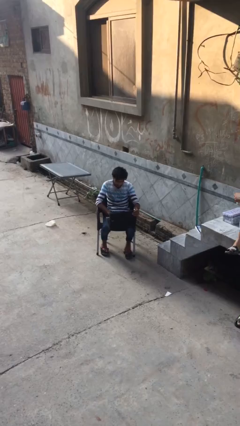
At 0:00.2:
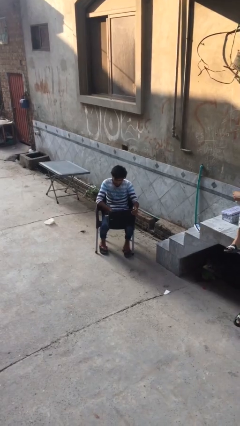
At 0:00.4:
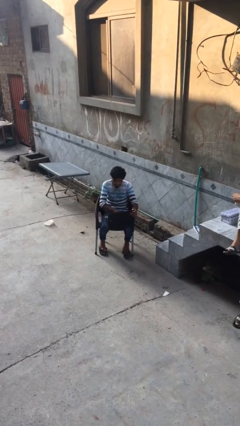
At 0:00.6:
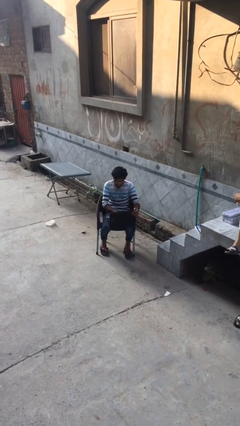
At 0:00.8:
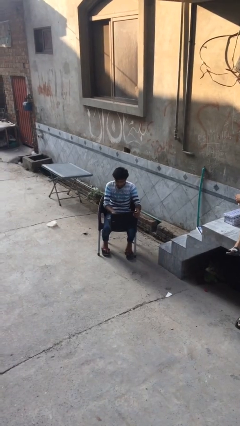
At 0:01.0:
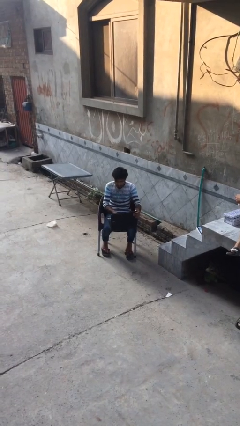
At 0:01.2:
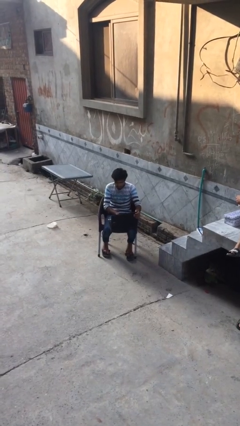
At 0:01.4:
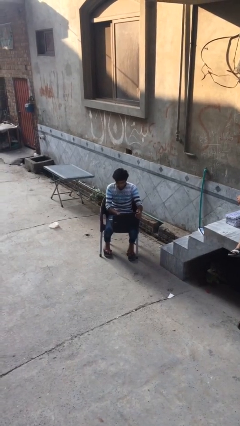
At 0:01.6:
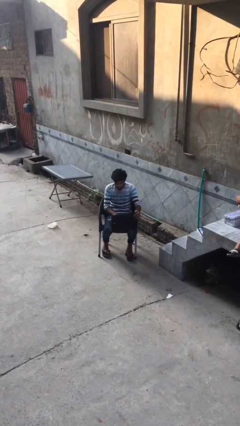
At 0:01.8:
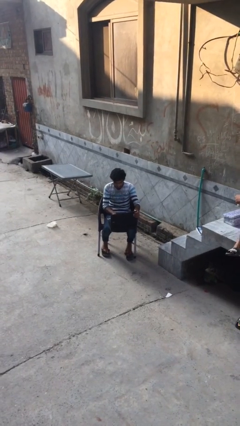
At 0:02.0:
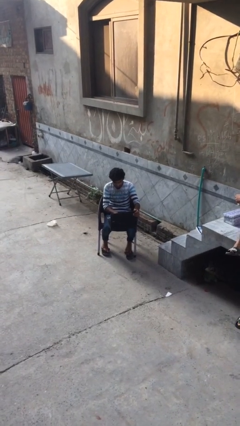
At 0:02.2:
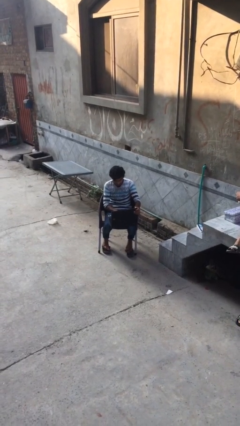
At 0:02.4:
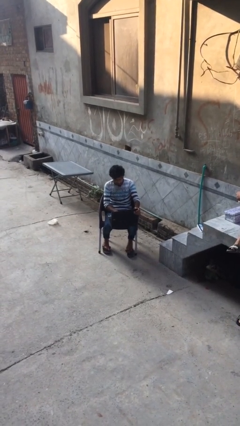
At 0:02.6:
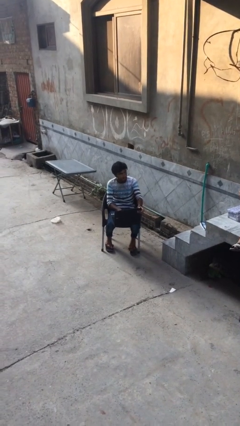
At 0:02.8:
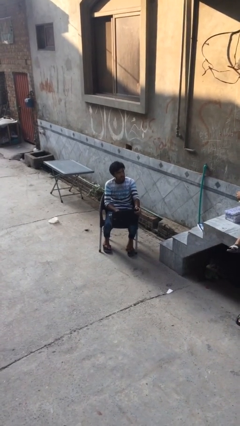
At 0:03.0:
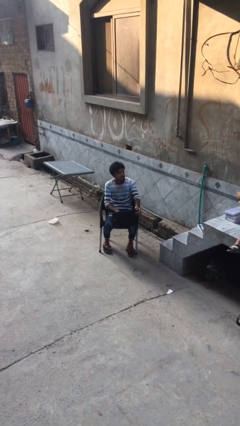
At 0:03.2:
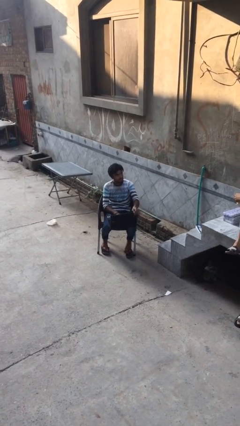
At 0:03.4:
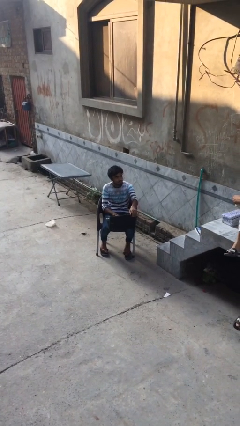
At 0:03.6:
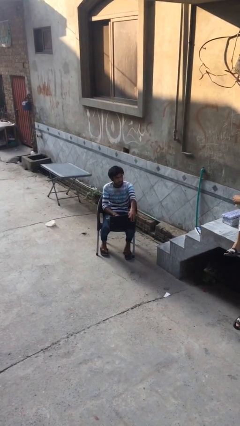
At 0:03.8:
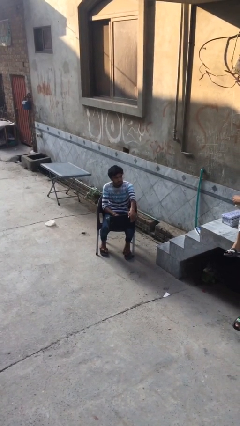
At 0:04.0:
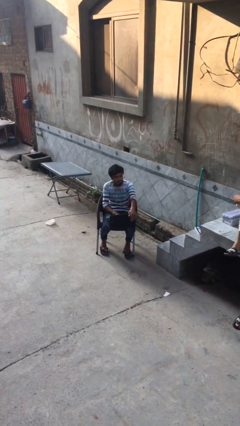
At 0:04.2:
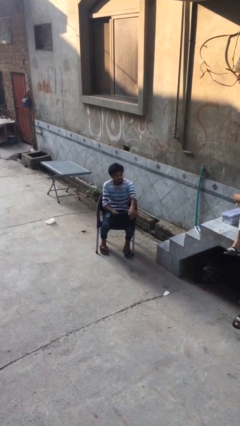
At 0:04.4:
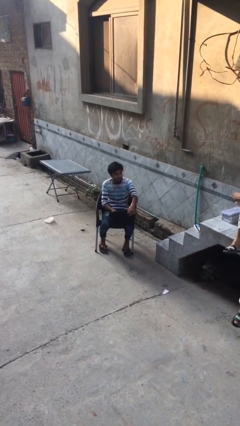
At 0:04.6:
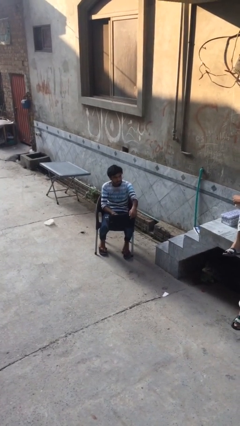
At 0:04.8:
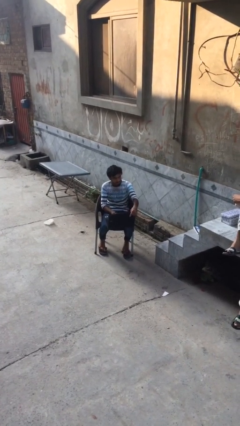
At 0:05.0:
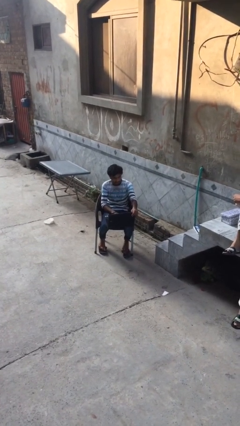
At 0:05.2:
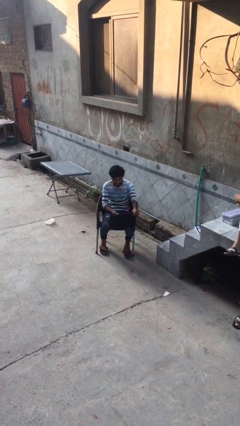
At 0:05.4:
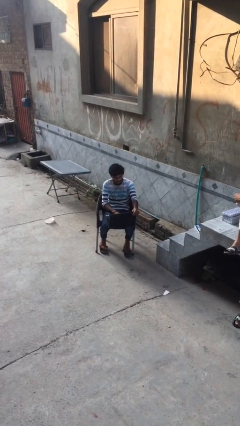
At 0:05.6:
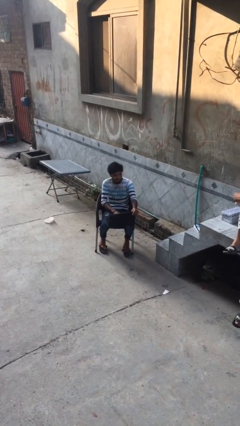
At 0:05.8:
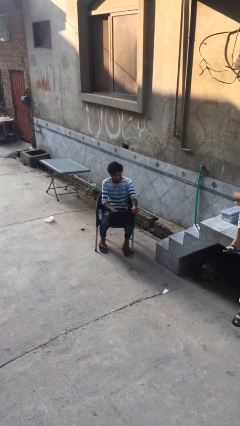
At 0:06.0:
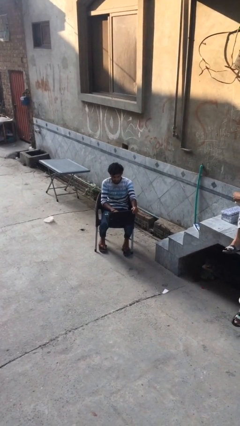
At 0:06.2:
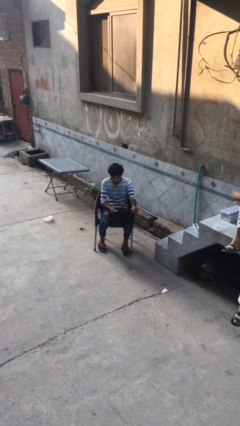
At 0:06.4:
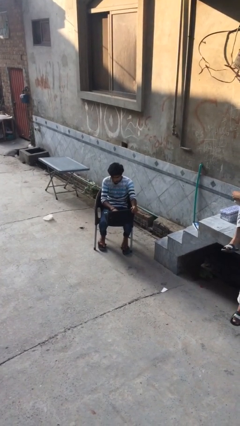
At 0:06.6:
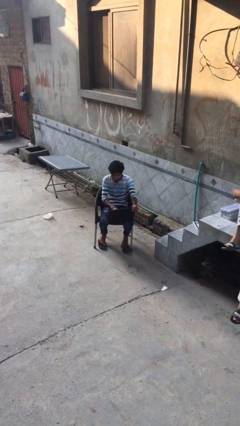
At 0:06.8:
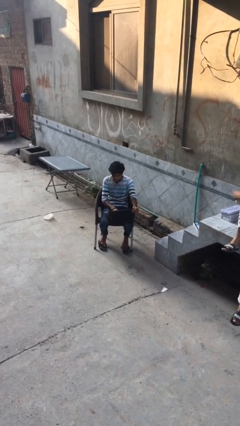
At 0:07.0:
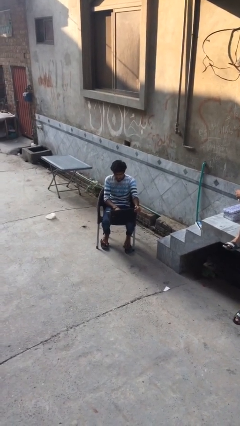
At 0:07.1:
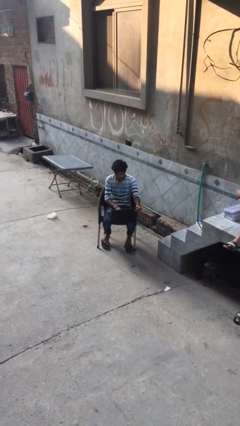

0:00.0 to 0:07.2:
person interacts with laptop

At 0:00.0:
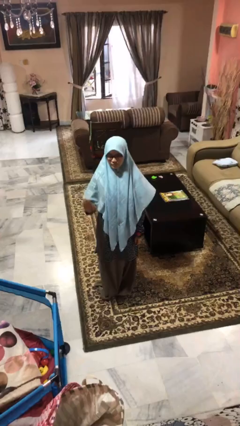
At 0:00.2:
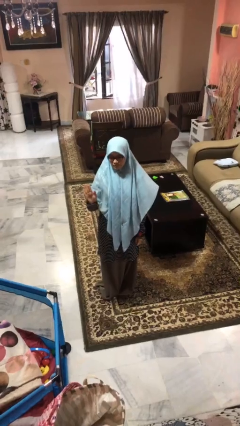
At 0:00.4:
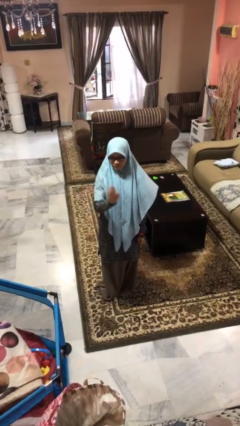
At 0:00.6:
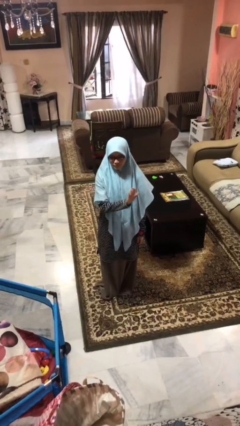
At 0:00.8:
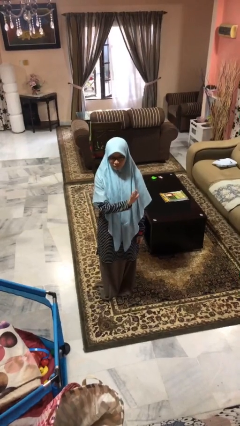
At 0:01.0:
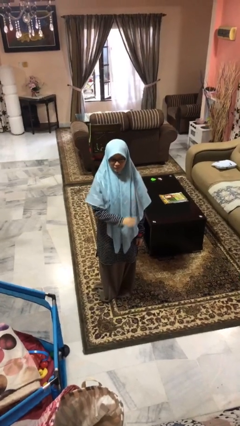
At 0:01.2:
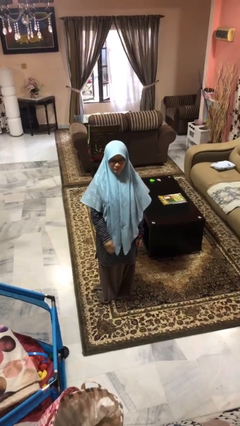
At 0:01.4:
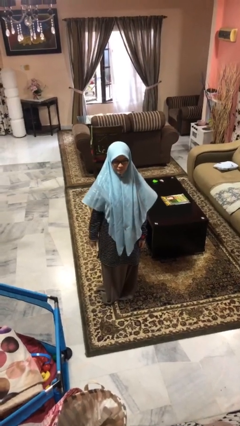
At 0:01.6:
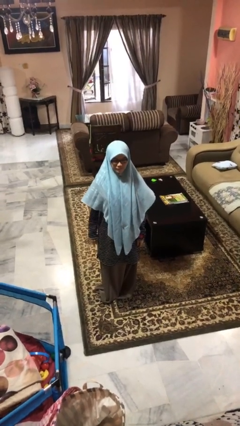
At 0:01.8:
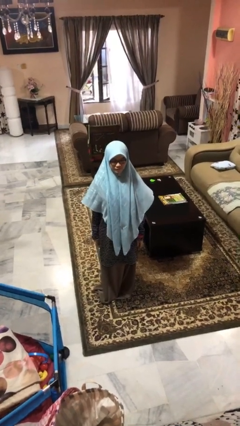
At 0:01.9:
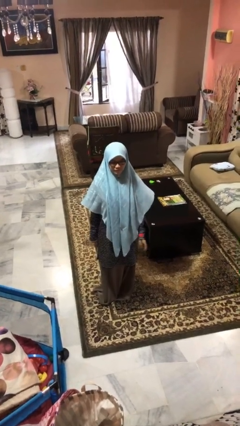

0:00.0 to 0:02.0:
person gestures swipe left

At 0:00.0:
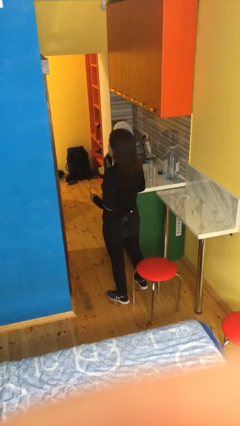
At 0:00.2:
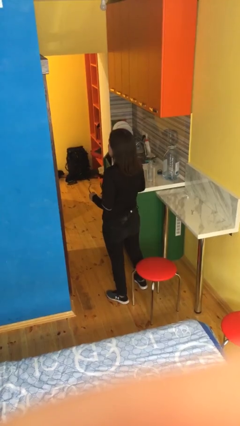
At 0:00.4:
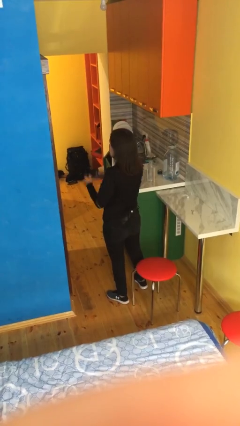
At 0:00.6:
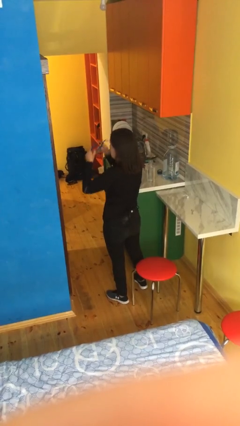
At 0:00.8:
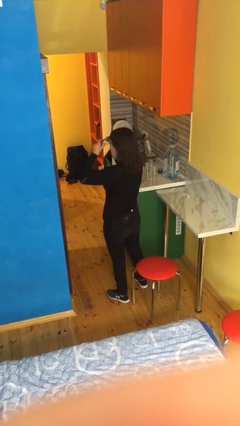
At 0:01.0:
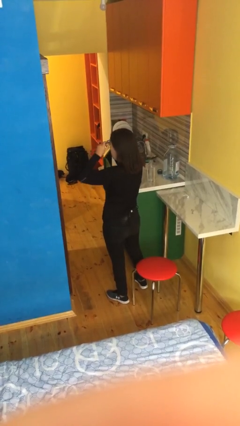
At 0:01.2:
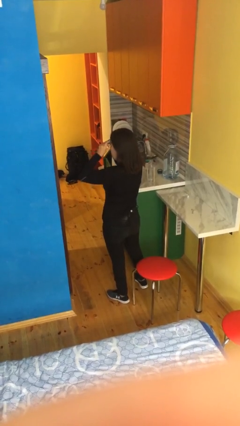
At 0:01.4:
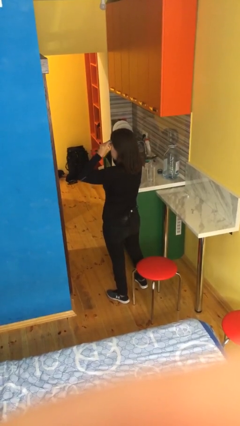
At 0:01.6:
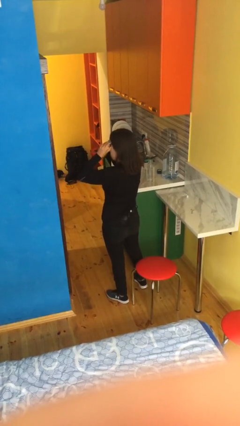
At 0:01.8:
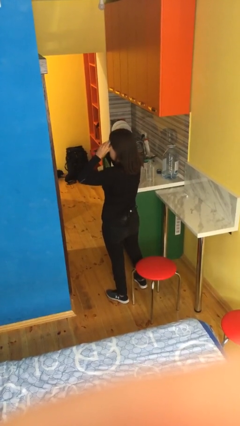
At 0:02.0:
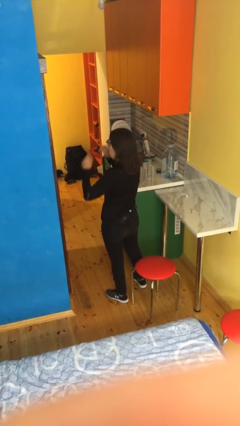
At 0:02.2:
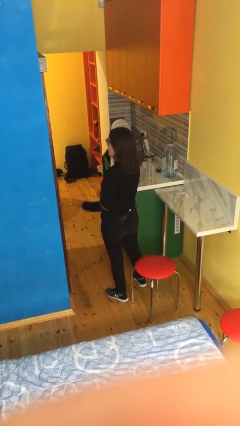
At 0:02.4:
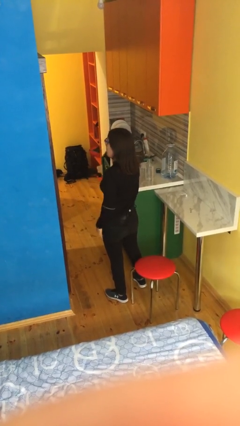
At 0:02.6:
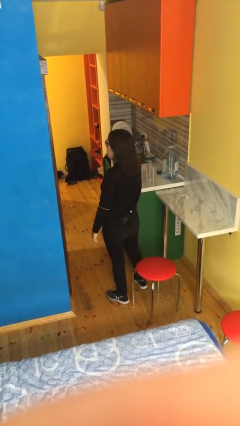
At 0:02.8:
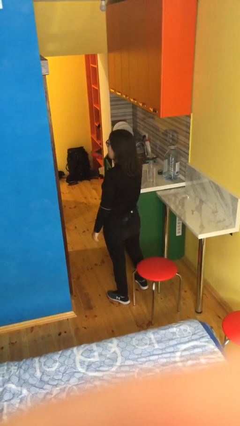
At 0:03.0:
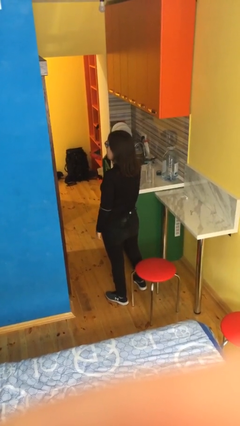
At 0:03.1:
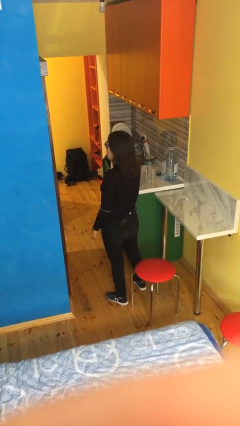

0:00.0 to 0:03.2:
person puts on glasses

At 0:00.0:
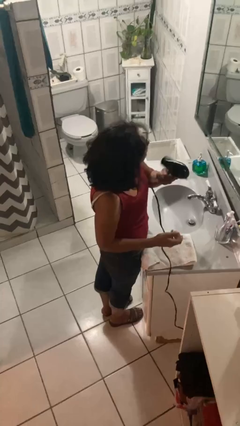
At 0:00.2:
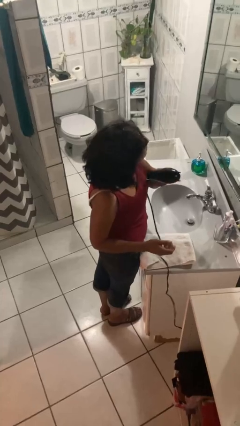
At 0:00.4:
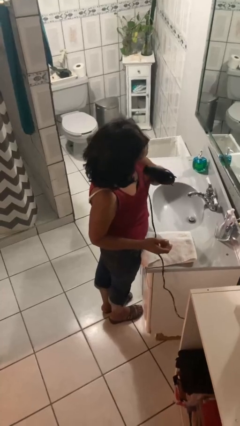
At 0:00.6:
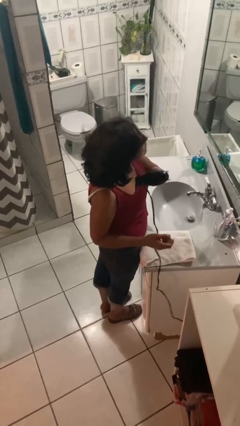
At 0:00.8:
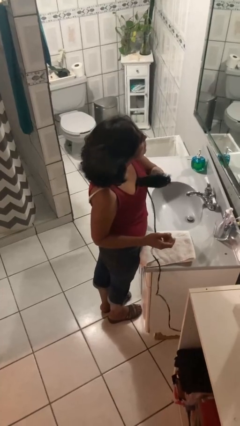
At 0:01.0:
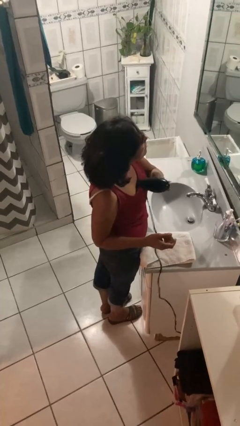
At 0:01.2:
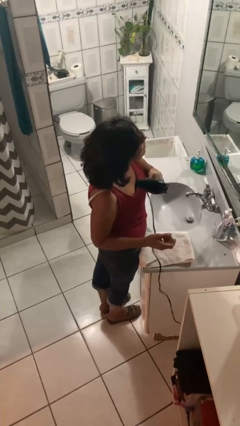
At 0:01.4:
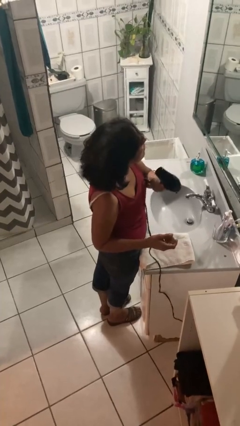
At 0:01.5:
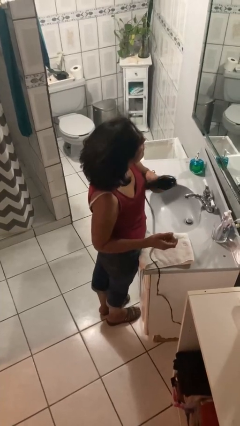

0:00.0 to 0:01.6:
person dries hair with hairdryer

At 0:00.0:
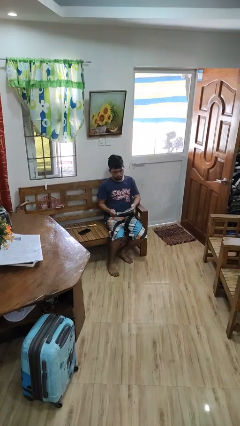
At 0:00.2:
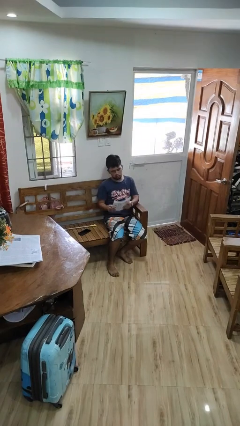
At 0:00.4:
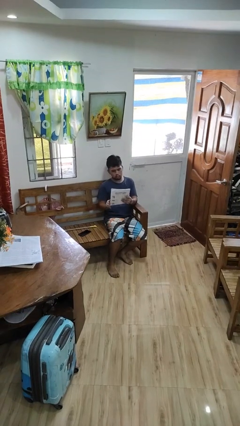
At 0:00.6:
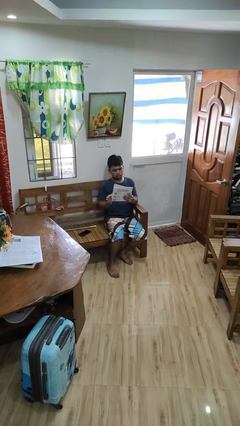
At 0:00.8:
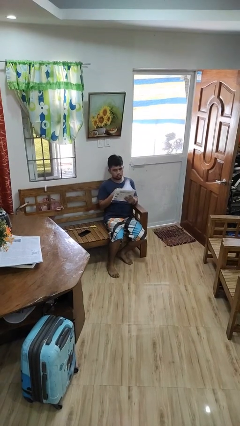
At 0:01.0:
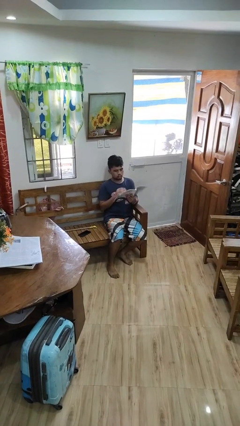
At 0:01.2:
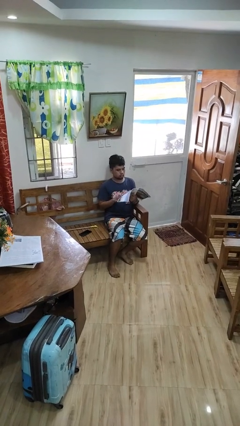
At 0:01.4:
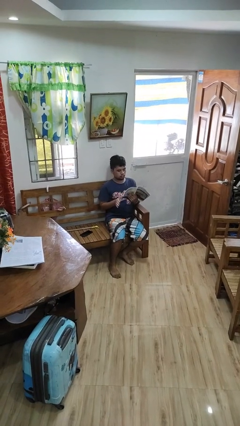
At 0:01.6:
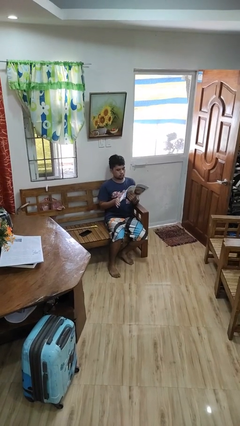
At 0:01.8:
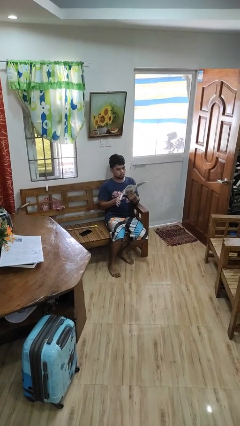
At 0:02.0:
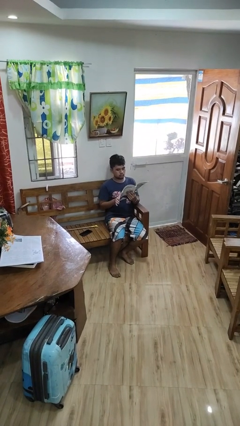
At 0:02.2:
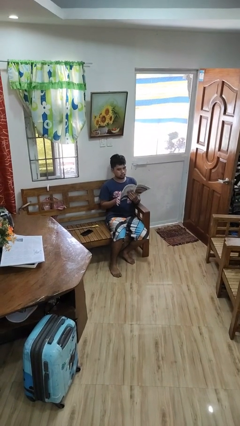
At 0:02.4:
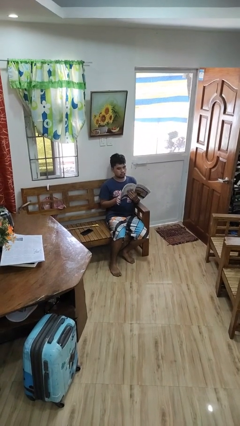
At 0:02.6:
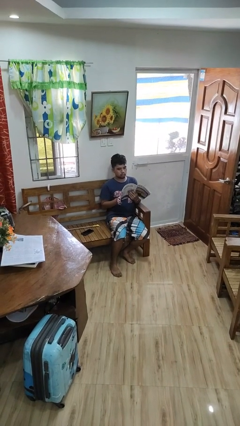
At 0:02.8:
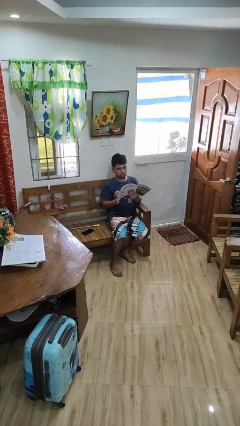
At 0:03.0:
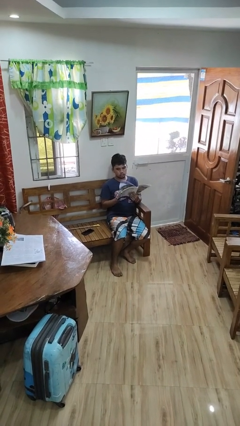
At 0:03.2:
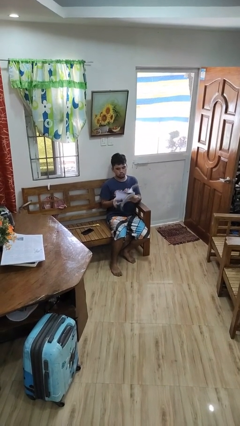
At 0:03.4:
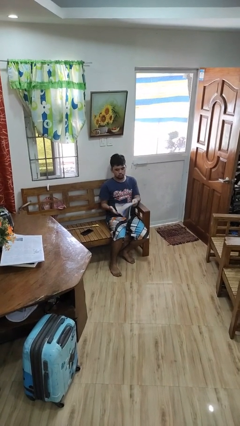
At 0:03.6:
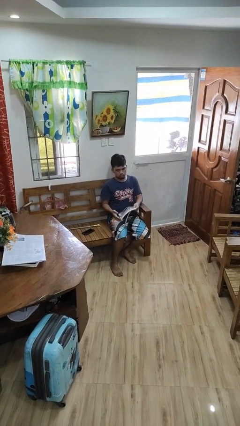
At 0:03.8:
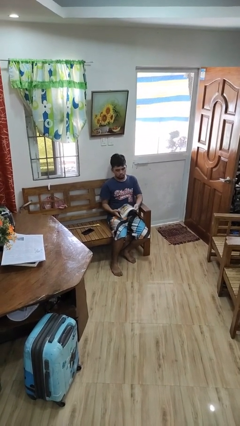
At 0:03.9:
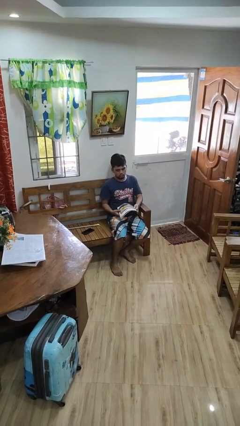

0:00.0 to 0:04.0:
person reads magazine
